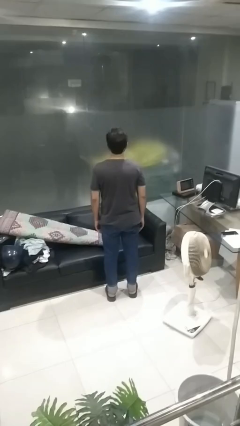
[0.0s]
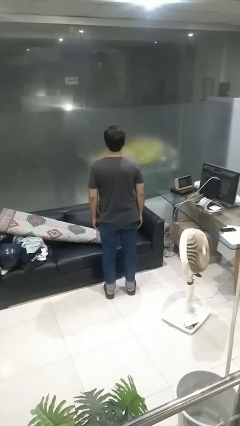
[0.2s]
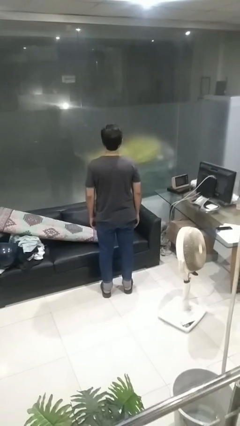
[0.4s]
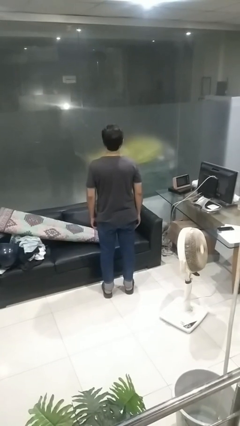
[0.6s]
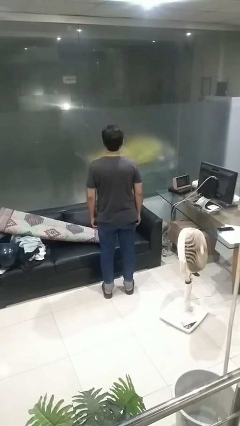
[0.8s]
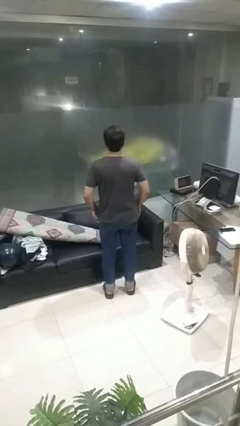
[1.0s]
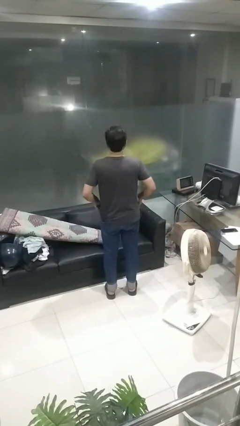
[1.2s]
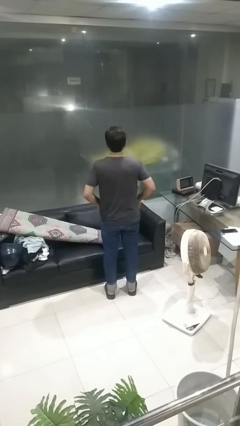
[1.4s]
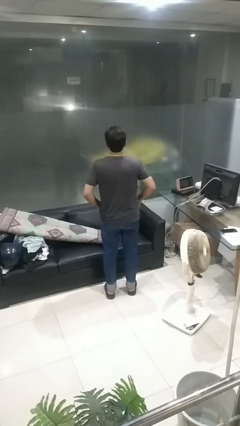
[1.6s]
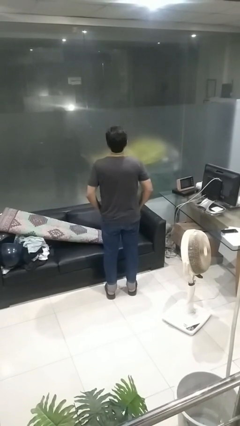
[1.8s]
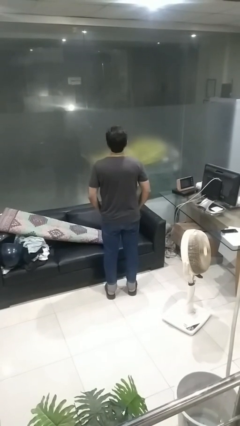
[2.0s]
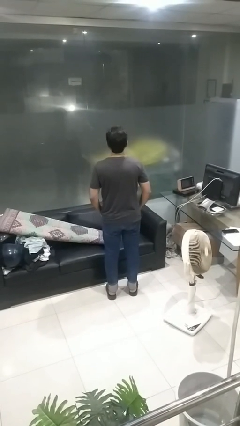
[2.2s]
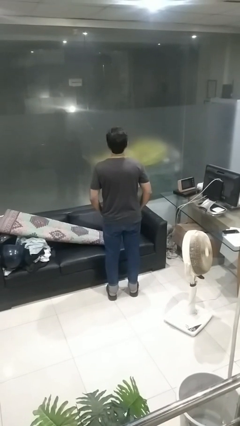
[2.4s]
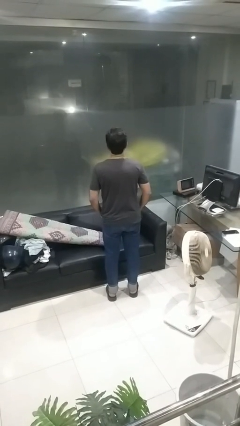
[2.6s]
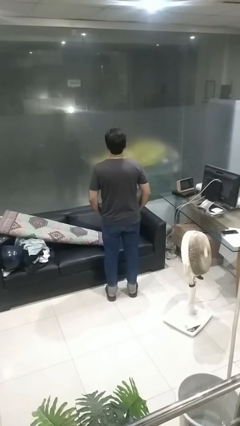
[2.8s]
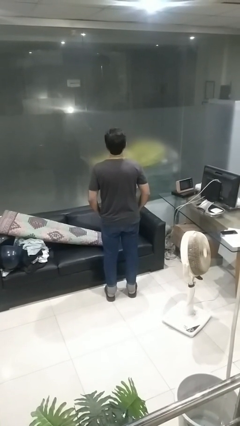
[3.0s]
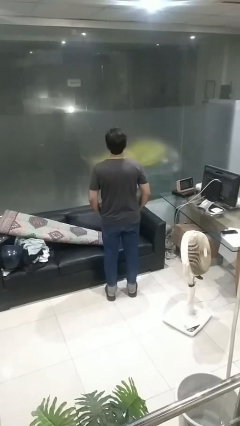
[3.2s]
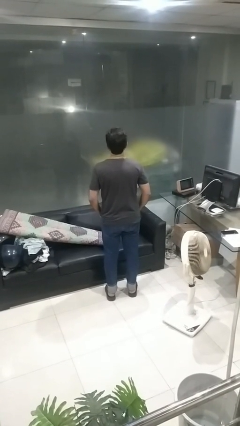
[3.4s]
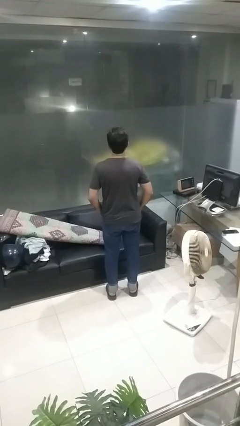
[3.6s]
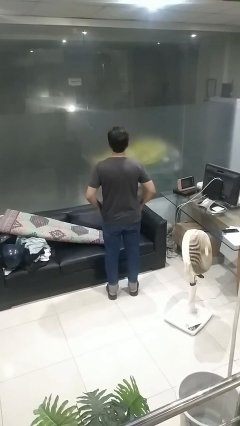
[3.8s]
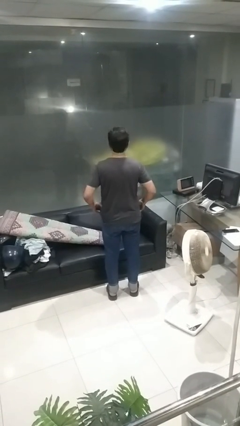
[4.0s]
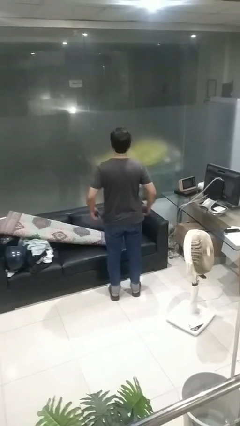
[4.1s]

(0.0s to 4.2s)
person puts hands in back pockets

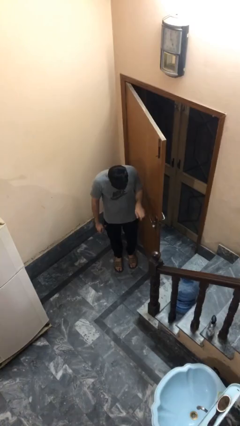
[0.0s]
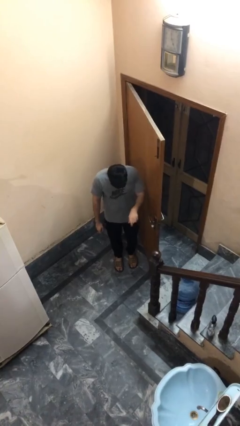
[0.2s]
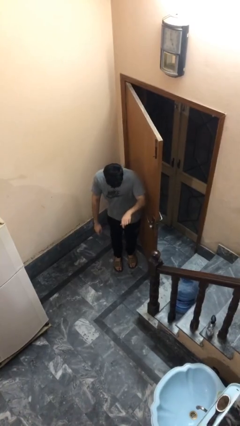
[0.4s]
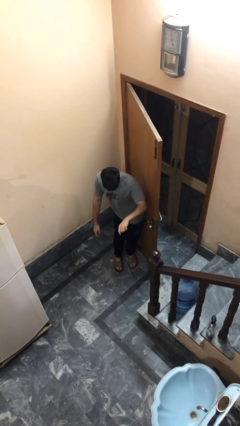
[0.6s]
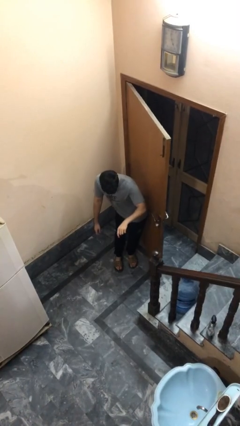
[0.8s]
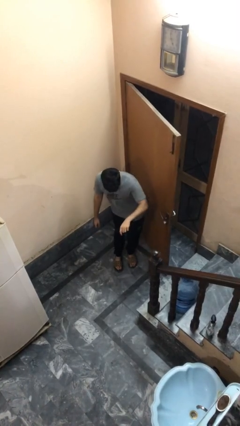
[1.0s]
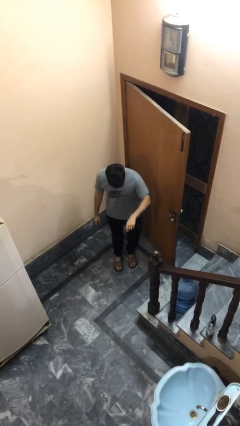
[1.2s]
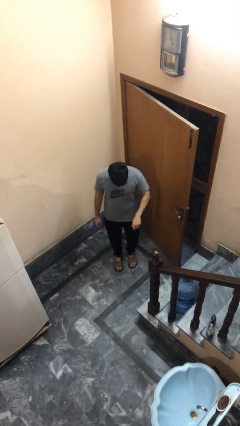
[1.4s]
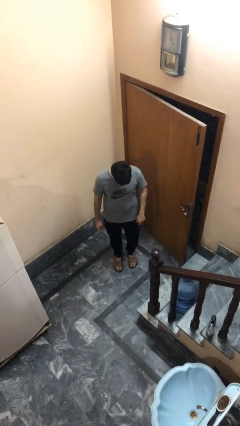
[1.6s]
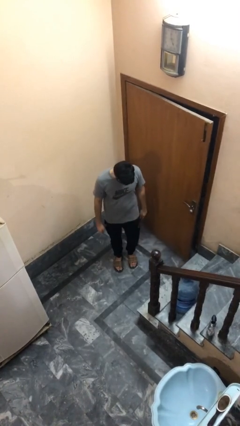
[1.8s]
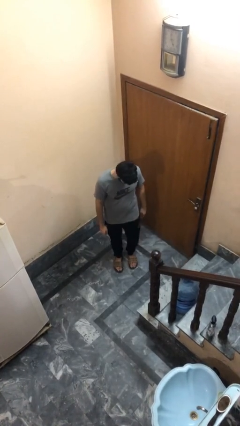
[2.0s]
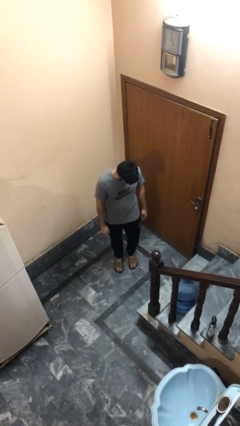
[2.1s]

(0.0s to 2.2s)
person closes door with hip

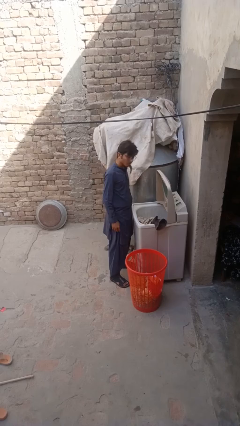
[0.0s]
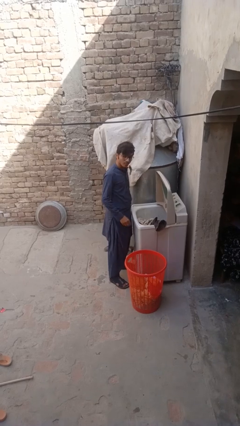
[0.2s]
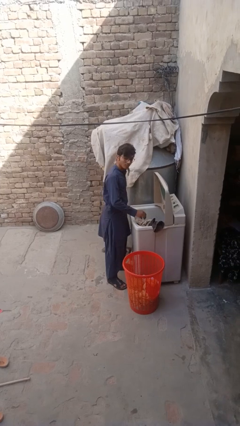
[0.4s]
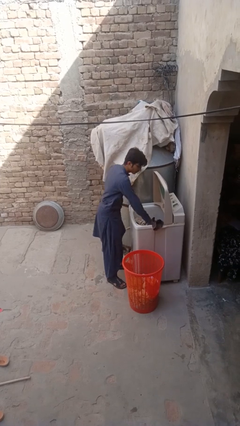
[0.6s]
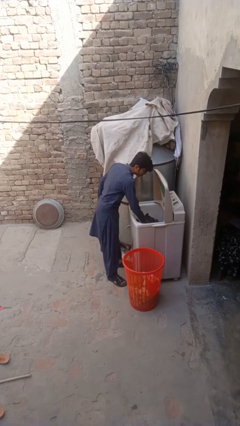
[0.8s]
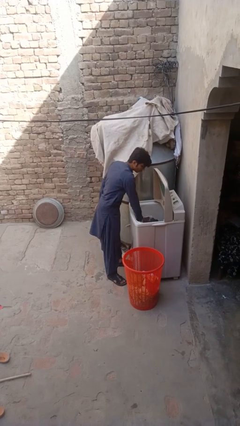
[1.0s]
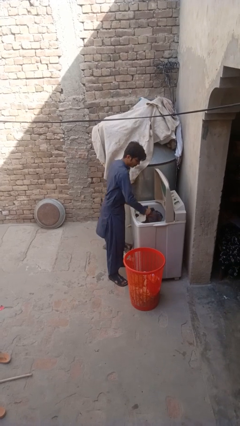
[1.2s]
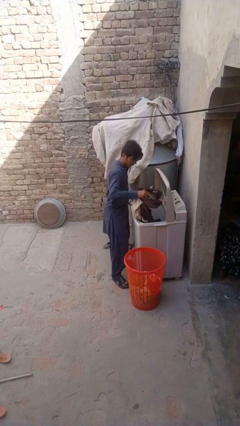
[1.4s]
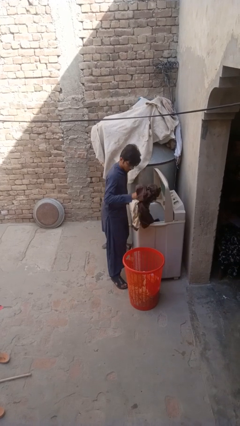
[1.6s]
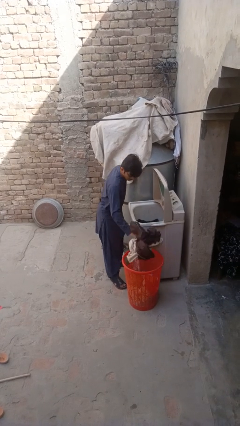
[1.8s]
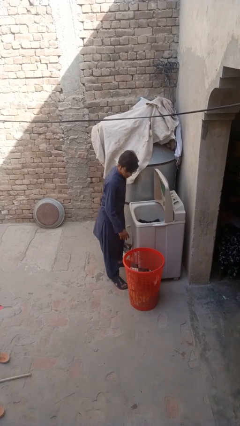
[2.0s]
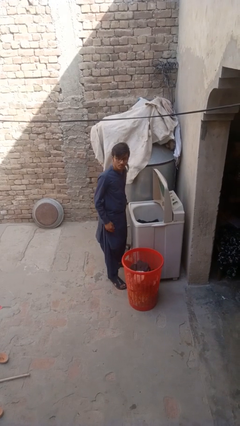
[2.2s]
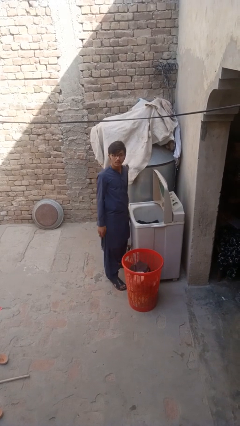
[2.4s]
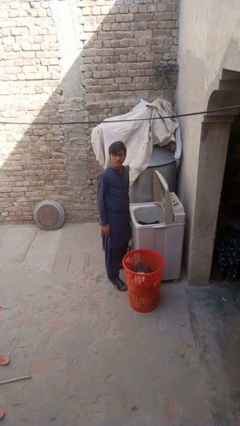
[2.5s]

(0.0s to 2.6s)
person unloads clotheswasher

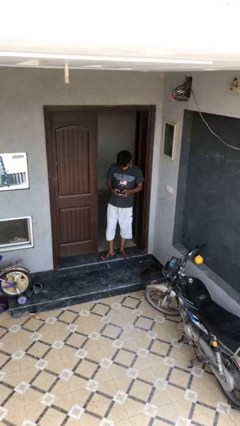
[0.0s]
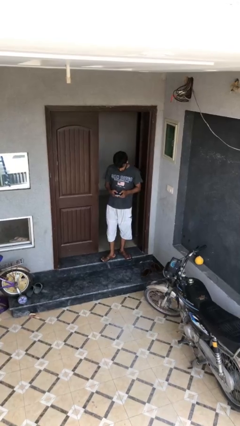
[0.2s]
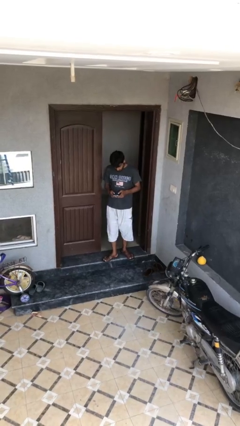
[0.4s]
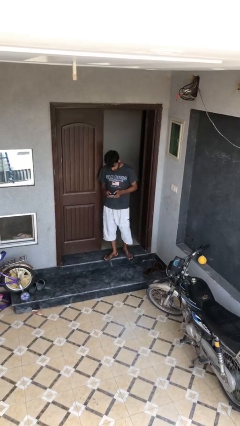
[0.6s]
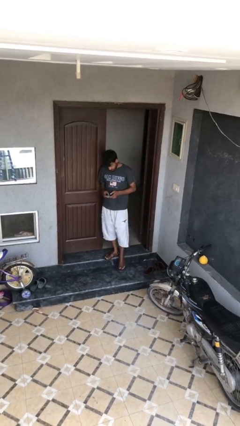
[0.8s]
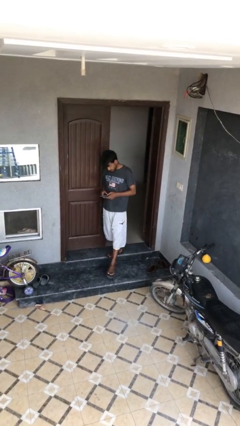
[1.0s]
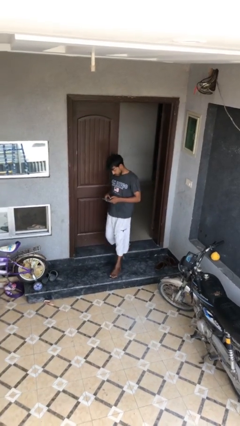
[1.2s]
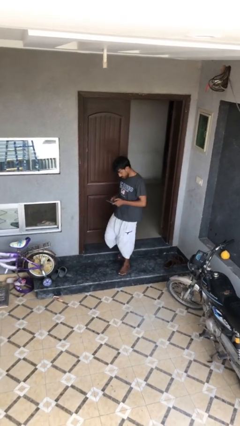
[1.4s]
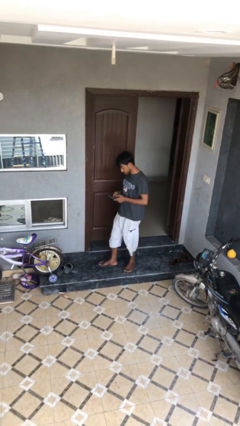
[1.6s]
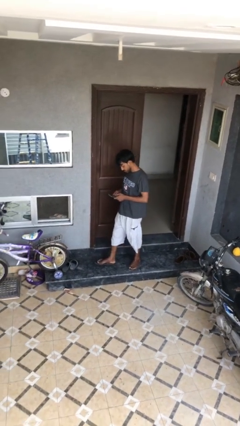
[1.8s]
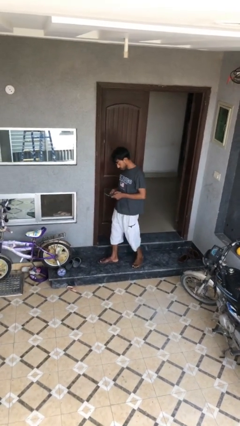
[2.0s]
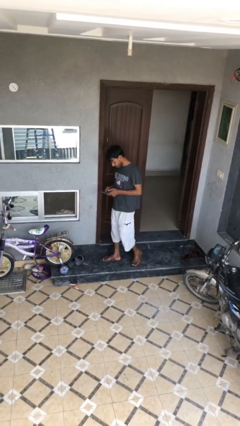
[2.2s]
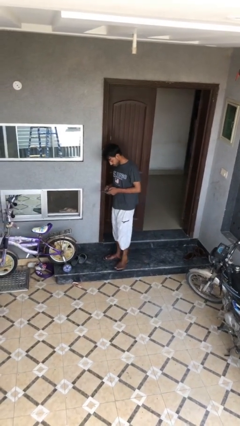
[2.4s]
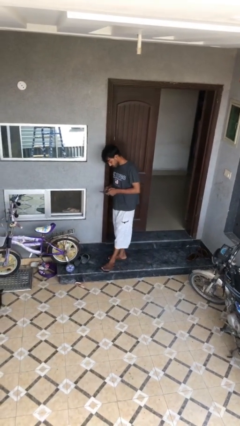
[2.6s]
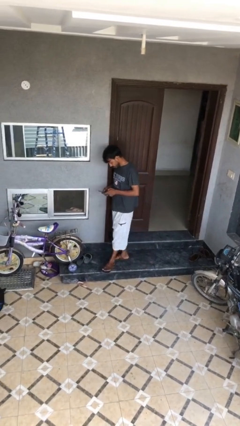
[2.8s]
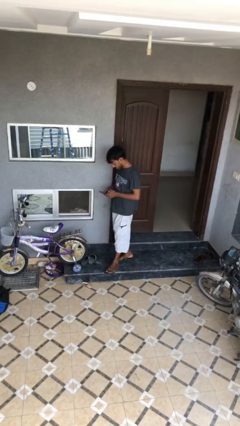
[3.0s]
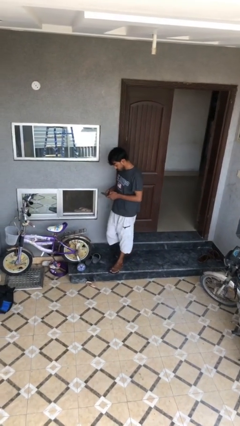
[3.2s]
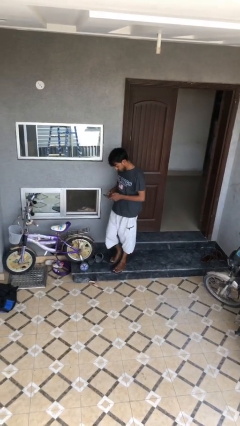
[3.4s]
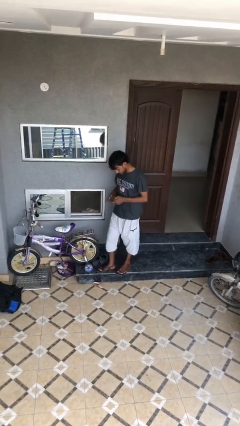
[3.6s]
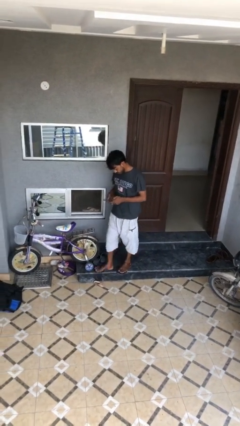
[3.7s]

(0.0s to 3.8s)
person texts on phone

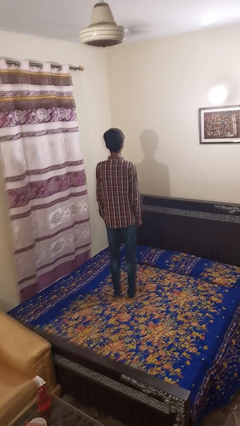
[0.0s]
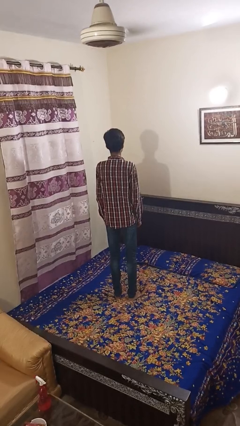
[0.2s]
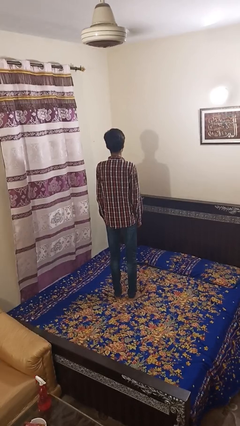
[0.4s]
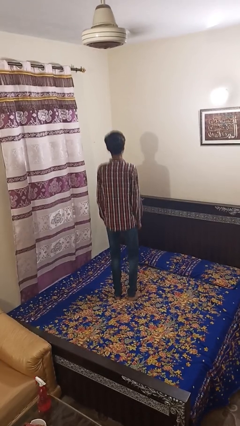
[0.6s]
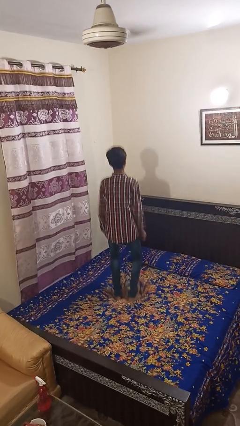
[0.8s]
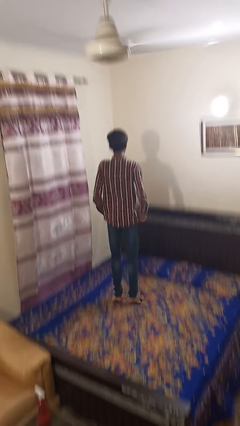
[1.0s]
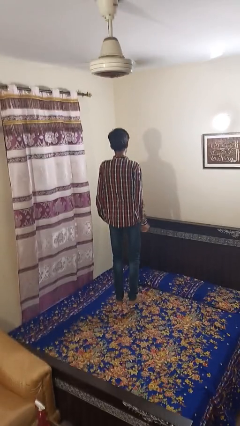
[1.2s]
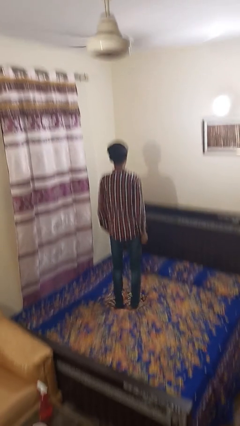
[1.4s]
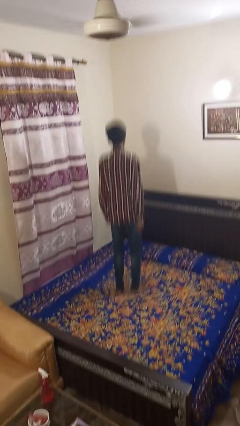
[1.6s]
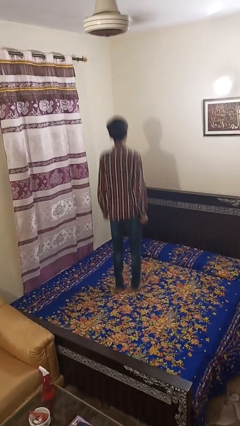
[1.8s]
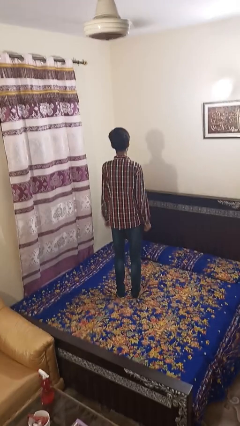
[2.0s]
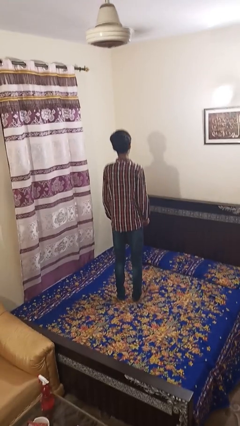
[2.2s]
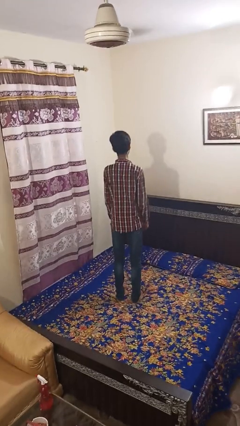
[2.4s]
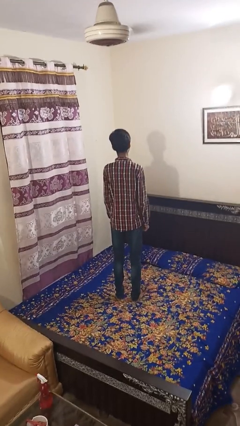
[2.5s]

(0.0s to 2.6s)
person jumps on bed

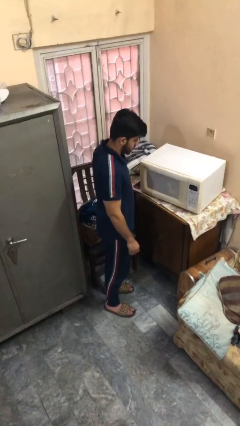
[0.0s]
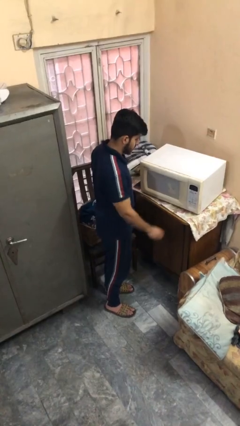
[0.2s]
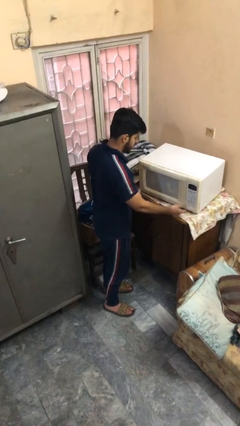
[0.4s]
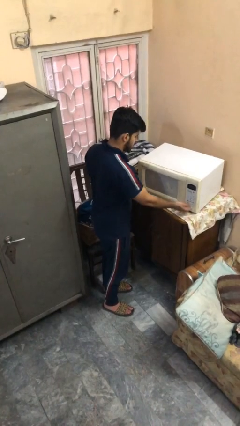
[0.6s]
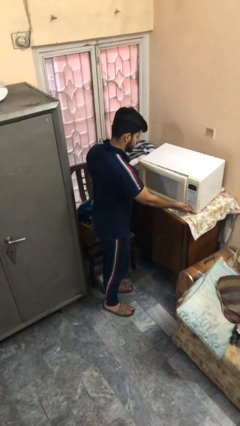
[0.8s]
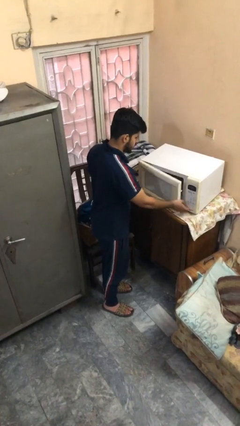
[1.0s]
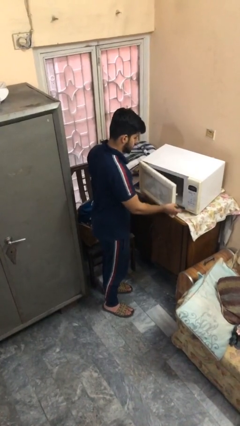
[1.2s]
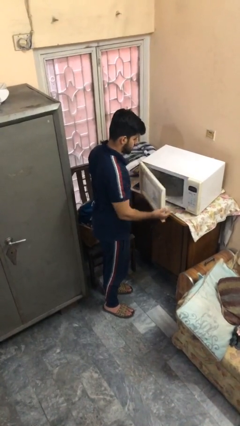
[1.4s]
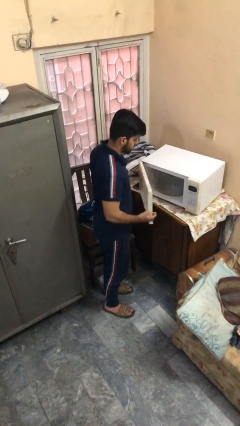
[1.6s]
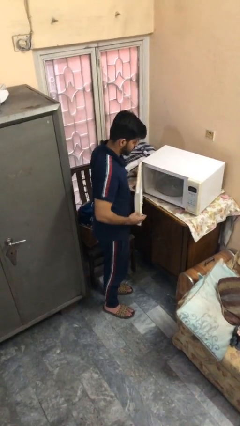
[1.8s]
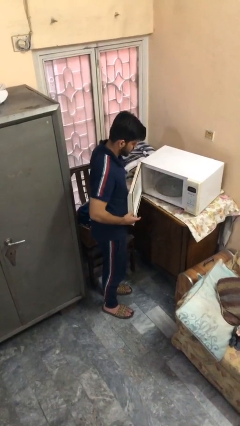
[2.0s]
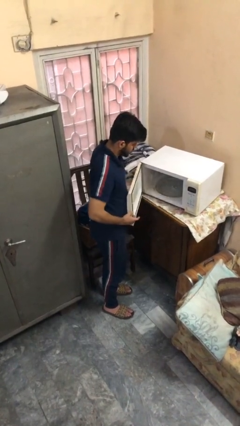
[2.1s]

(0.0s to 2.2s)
person opens microwave
